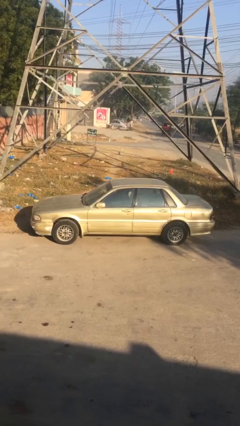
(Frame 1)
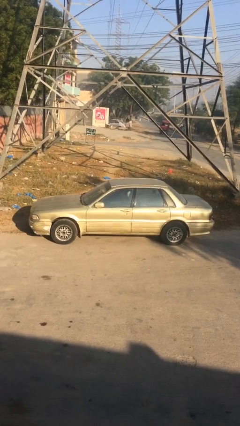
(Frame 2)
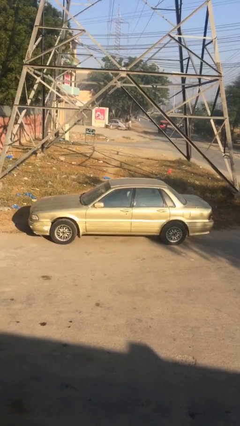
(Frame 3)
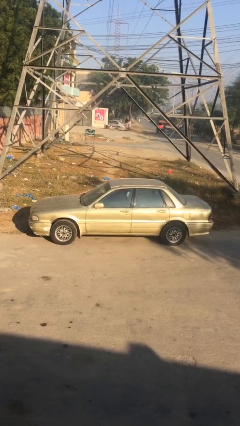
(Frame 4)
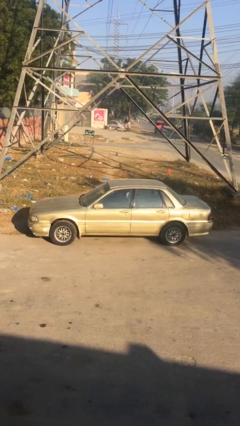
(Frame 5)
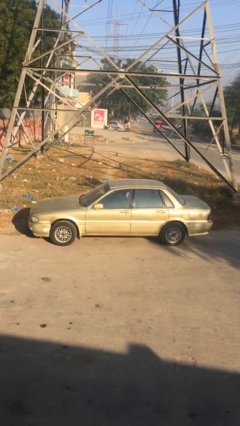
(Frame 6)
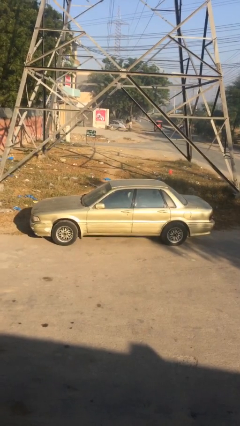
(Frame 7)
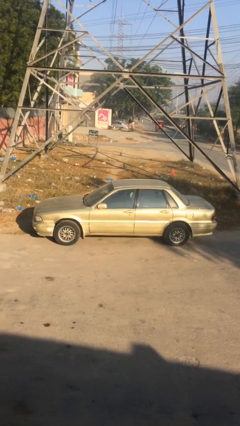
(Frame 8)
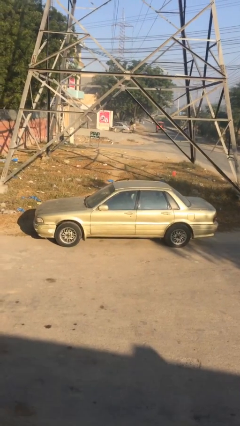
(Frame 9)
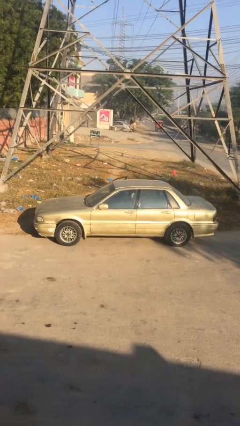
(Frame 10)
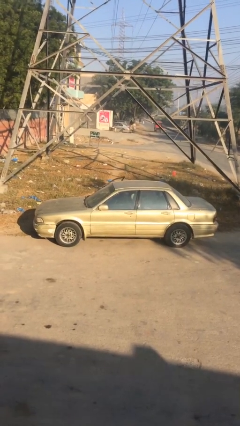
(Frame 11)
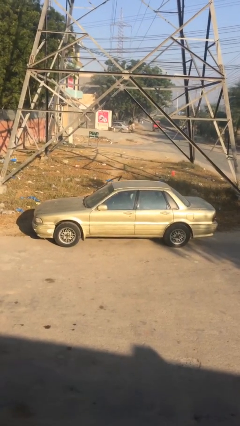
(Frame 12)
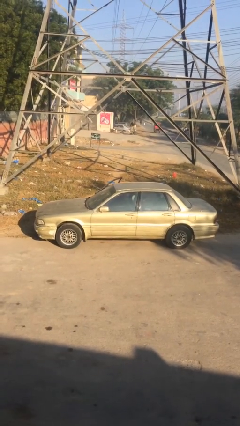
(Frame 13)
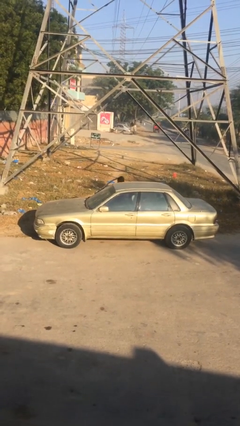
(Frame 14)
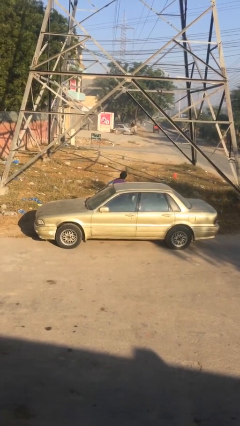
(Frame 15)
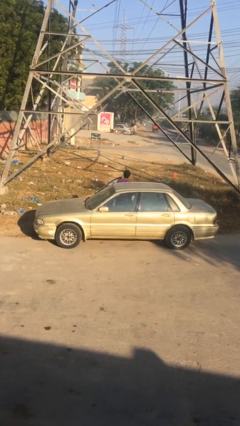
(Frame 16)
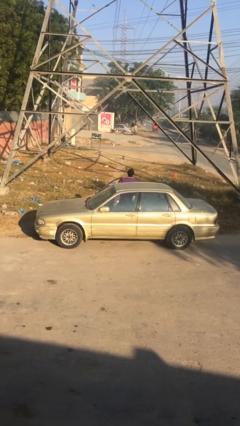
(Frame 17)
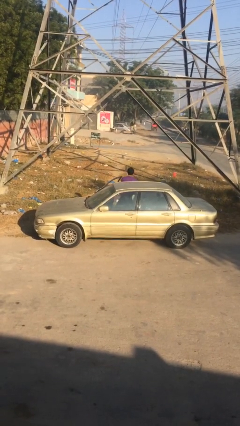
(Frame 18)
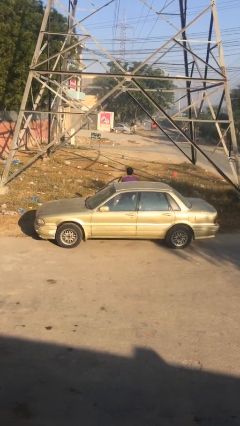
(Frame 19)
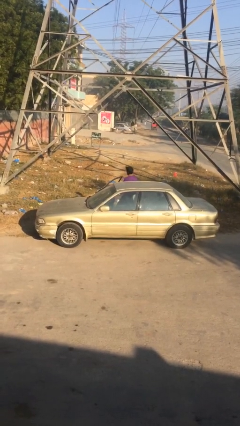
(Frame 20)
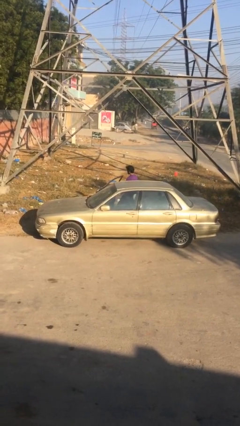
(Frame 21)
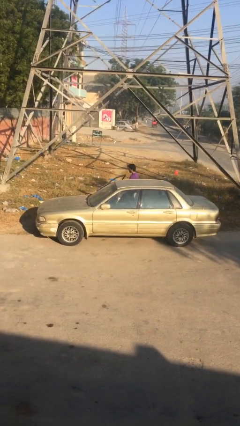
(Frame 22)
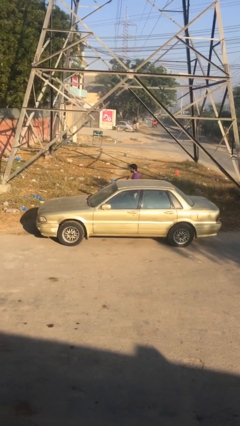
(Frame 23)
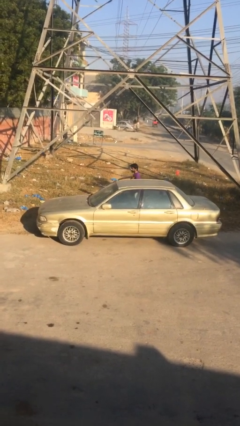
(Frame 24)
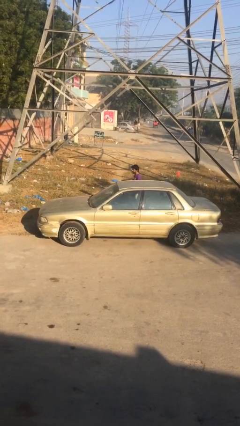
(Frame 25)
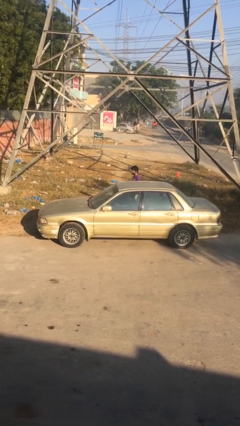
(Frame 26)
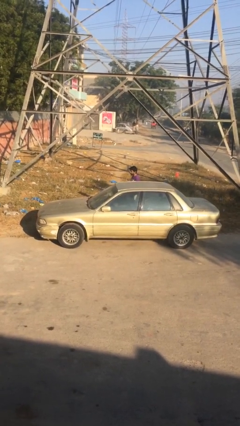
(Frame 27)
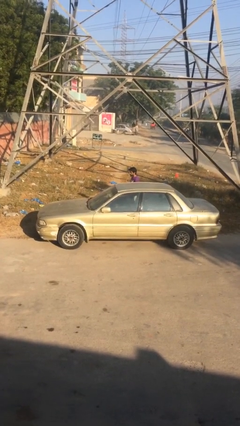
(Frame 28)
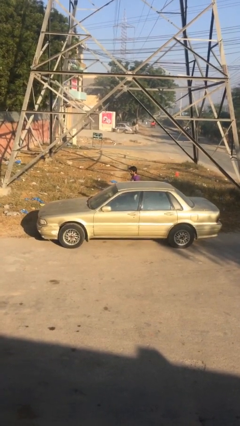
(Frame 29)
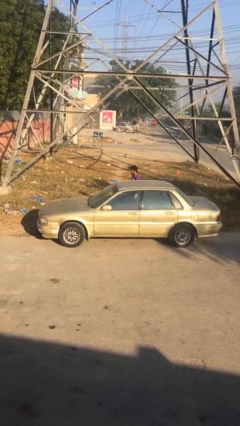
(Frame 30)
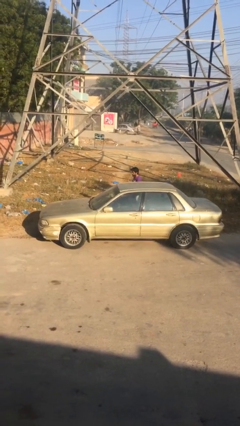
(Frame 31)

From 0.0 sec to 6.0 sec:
car drops off person

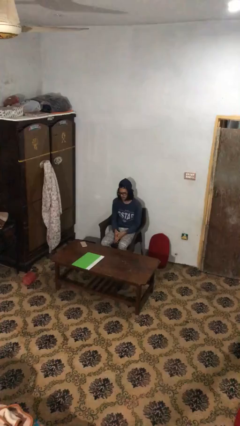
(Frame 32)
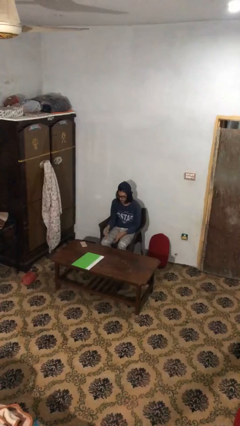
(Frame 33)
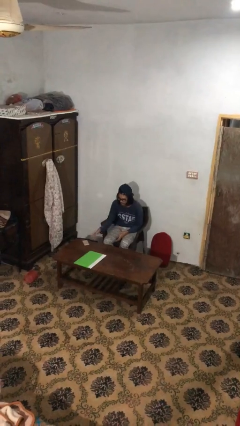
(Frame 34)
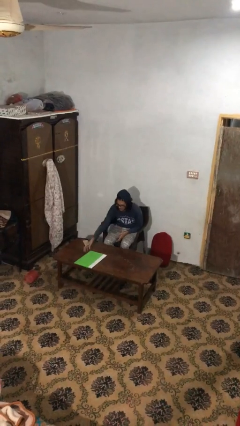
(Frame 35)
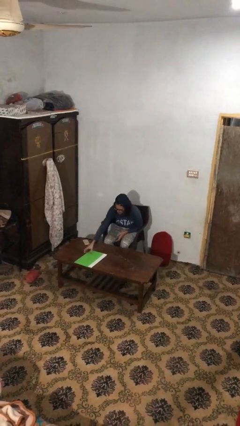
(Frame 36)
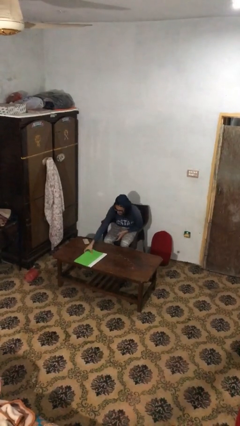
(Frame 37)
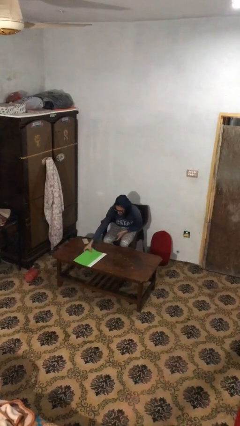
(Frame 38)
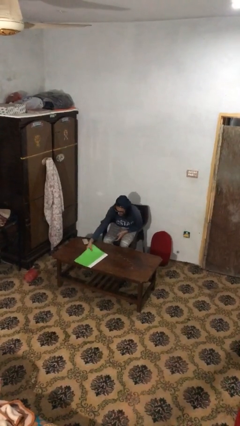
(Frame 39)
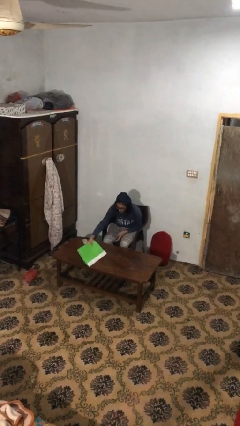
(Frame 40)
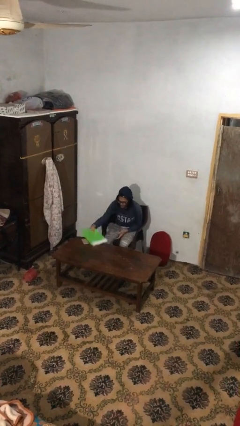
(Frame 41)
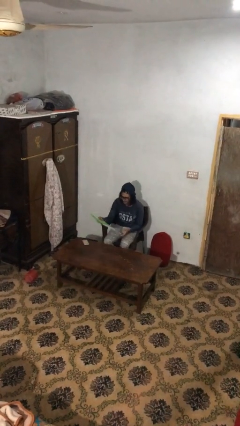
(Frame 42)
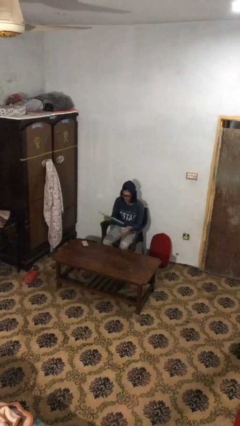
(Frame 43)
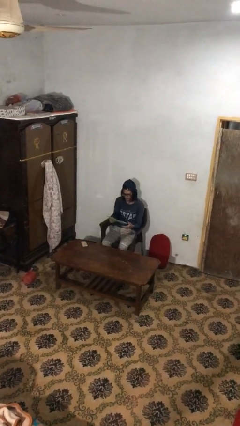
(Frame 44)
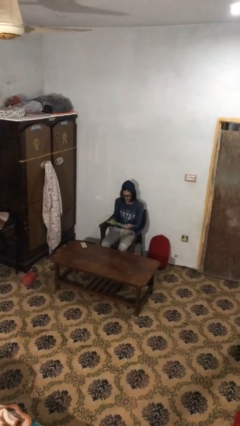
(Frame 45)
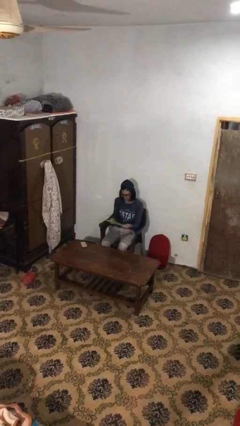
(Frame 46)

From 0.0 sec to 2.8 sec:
person picks up object from table

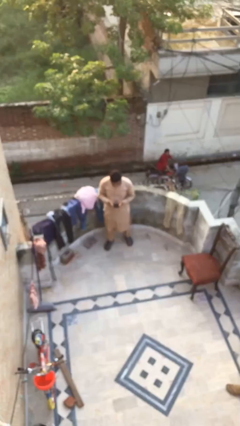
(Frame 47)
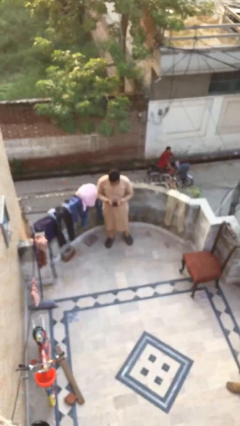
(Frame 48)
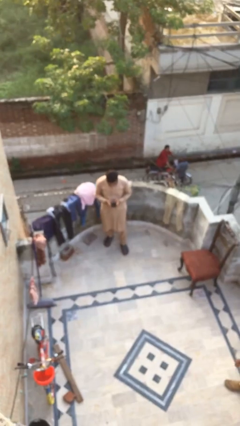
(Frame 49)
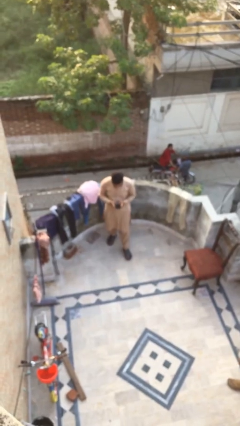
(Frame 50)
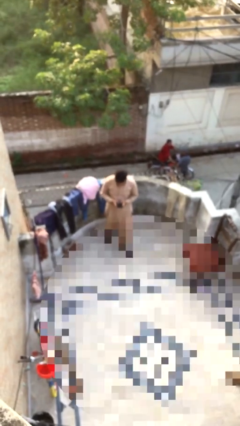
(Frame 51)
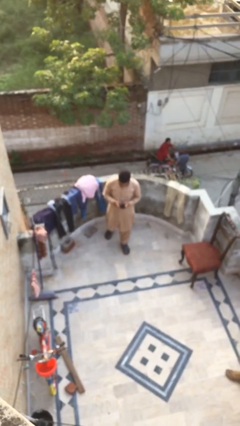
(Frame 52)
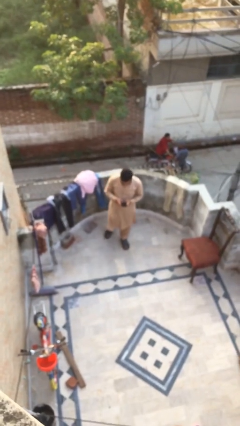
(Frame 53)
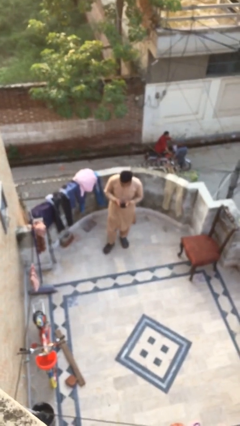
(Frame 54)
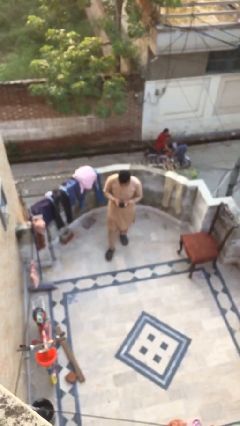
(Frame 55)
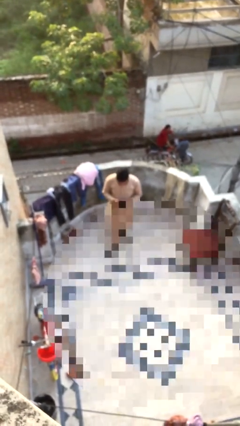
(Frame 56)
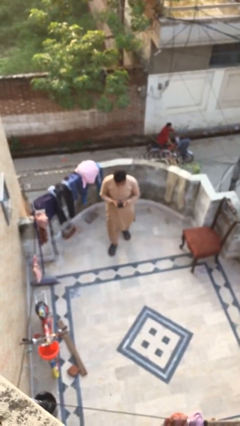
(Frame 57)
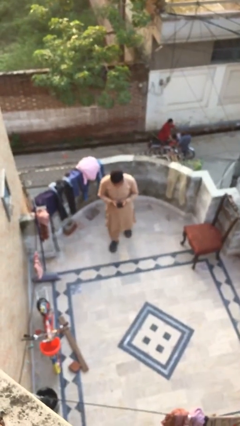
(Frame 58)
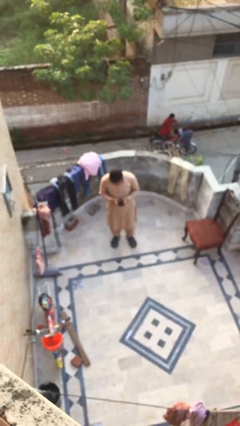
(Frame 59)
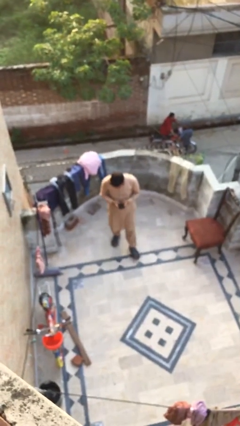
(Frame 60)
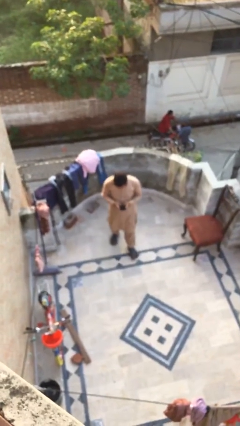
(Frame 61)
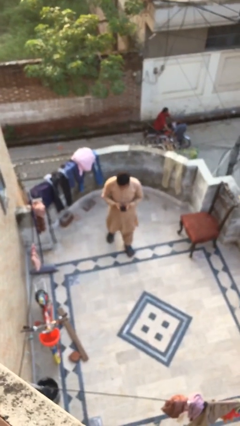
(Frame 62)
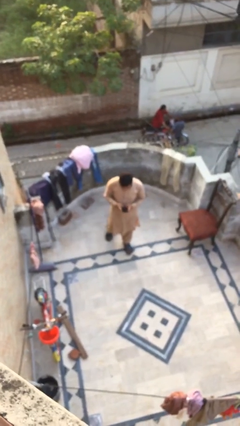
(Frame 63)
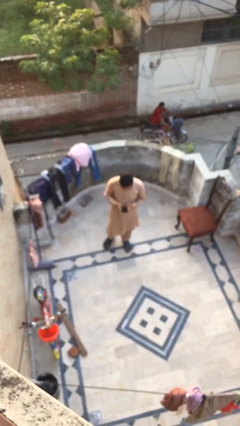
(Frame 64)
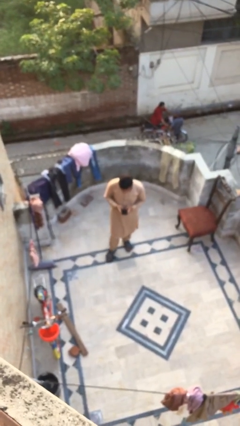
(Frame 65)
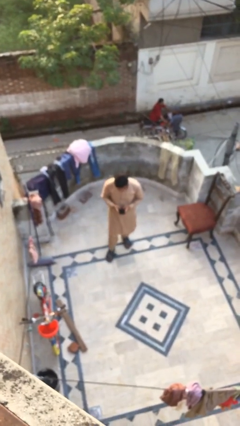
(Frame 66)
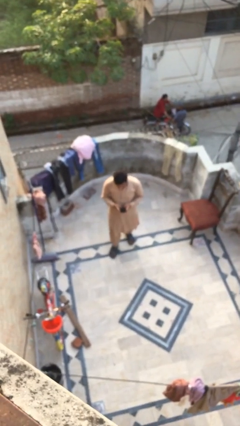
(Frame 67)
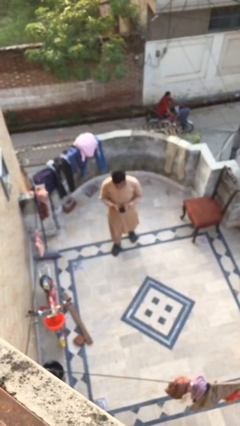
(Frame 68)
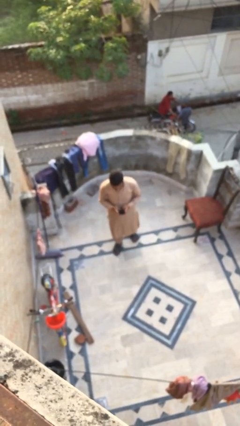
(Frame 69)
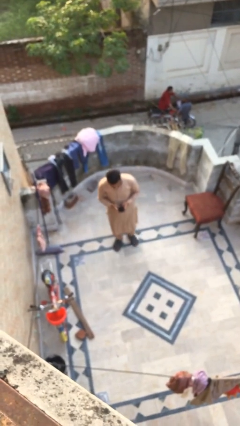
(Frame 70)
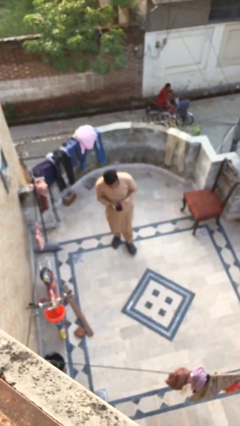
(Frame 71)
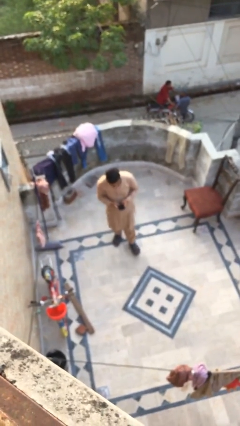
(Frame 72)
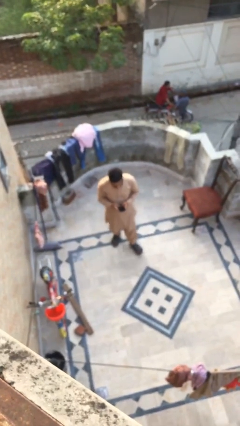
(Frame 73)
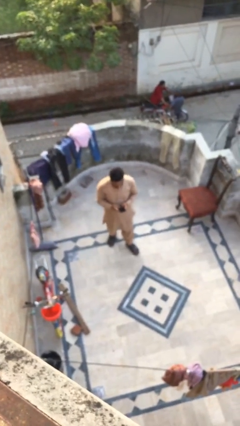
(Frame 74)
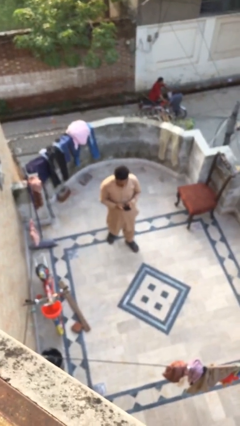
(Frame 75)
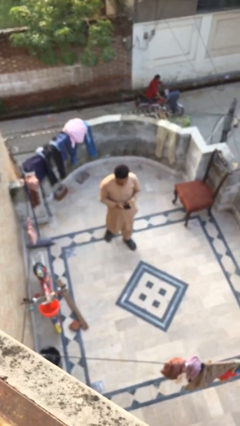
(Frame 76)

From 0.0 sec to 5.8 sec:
person texts on phone

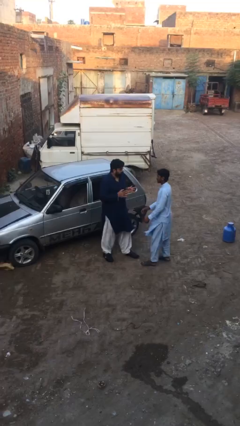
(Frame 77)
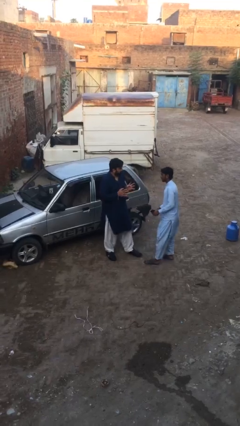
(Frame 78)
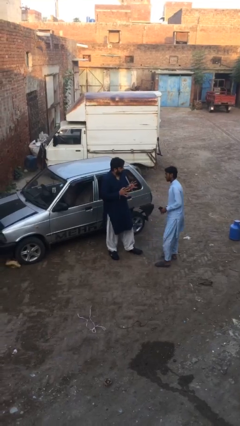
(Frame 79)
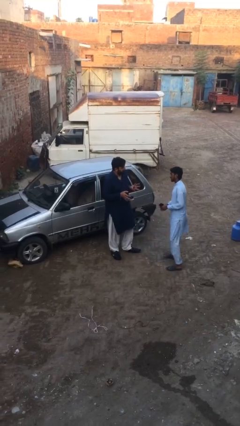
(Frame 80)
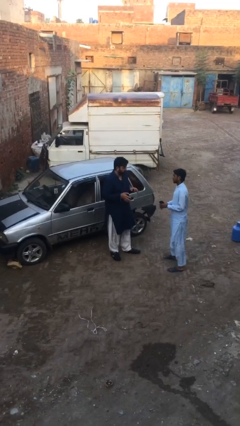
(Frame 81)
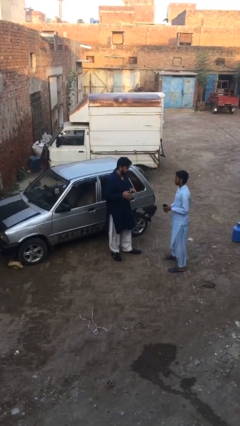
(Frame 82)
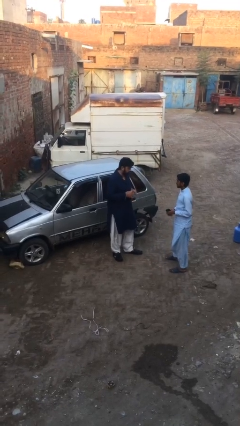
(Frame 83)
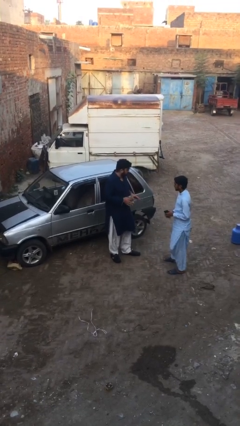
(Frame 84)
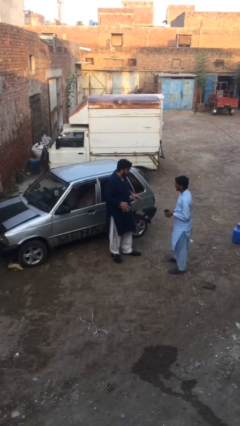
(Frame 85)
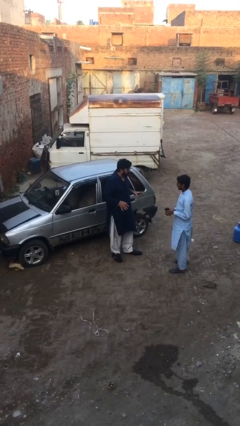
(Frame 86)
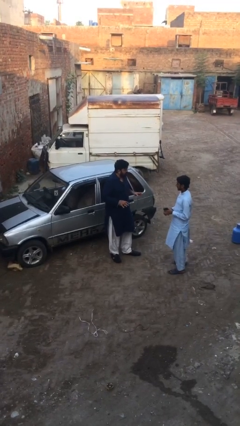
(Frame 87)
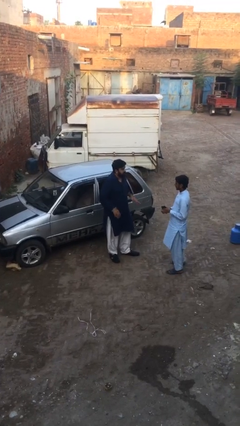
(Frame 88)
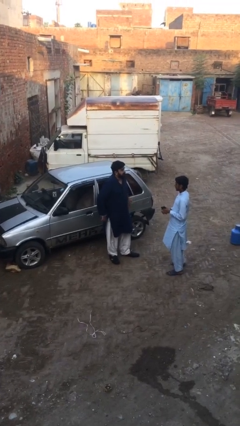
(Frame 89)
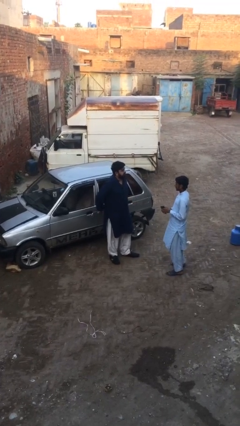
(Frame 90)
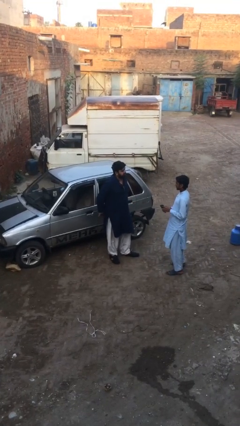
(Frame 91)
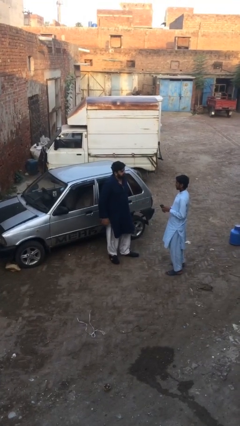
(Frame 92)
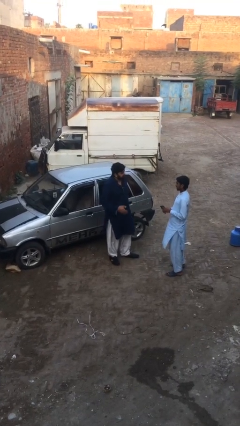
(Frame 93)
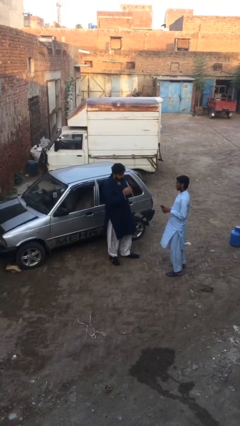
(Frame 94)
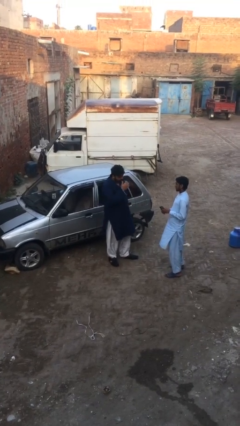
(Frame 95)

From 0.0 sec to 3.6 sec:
person talks to person
